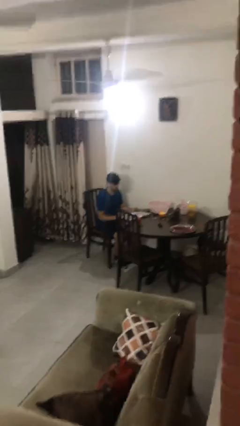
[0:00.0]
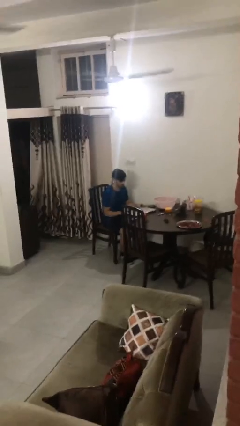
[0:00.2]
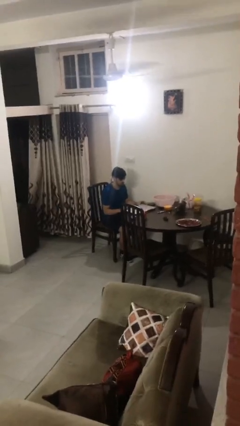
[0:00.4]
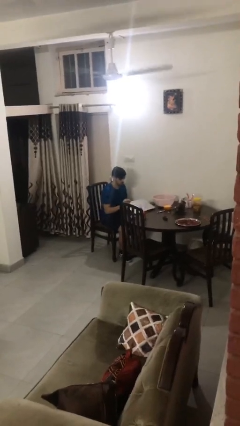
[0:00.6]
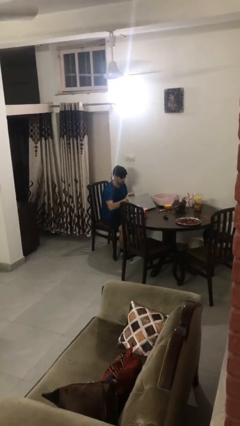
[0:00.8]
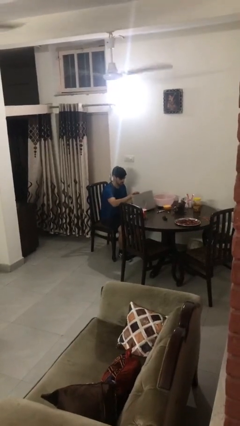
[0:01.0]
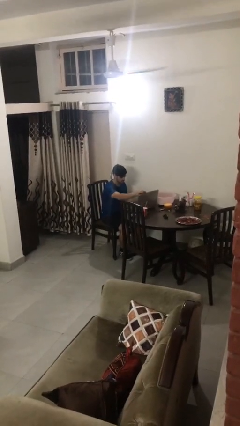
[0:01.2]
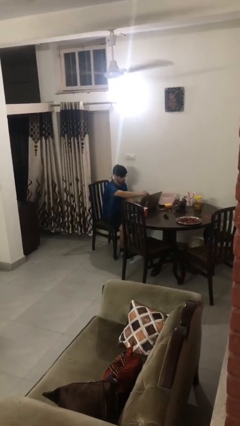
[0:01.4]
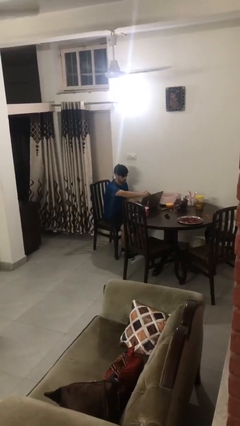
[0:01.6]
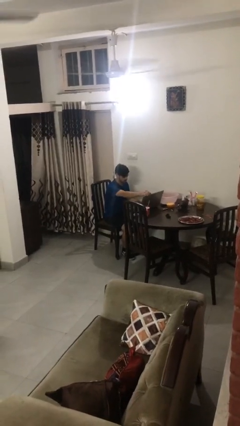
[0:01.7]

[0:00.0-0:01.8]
person opens laptop

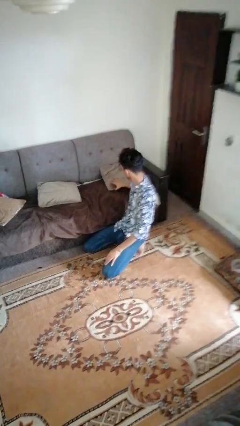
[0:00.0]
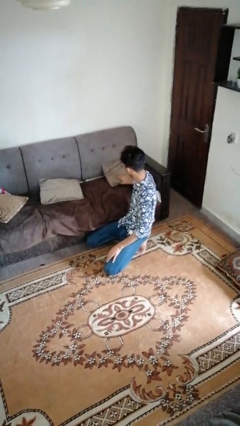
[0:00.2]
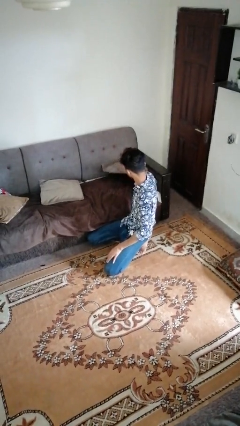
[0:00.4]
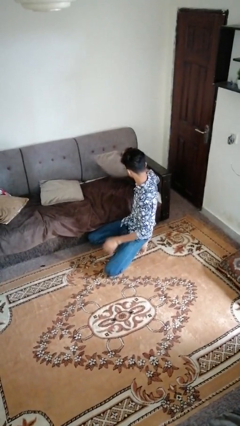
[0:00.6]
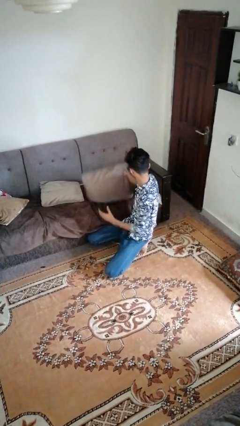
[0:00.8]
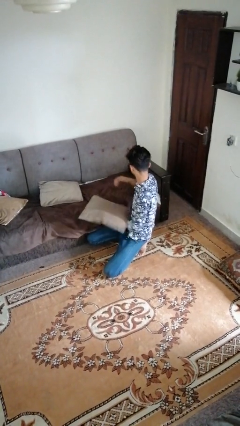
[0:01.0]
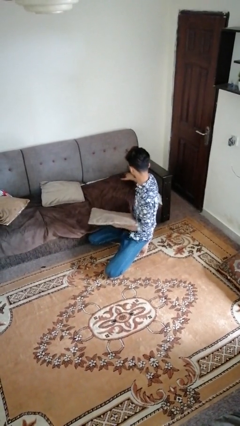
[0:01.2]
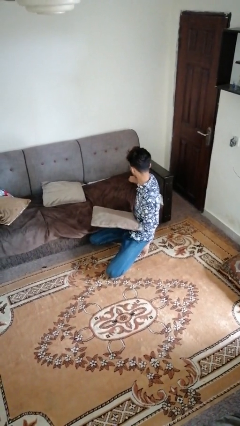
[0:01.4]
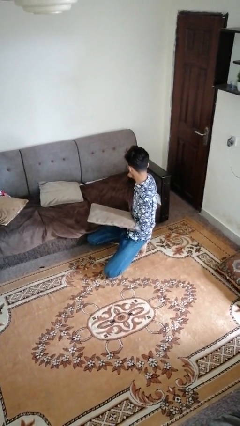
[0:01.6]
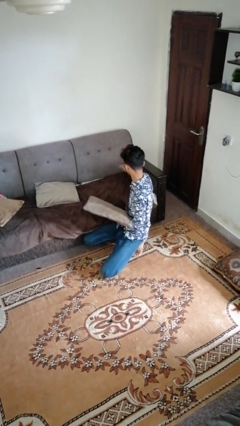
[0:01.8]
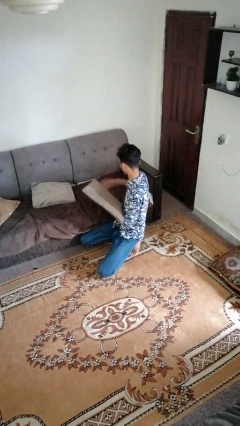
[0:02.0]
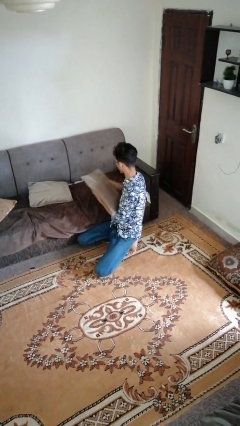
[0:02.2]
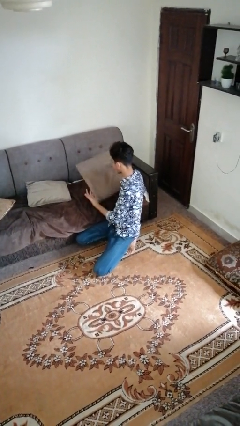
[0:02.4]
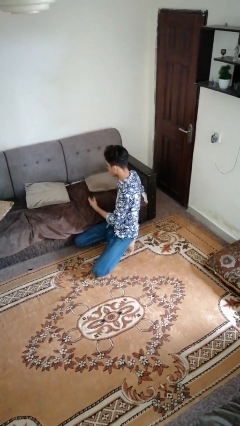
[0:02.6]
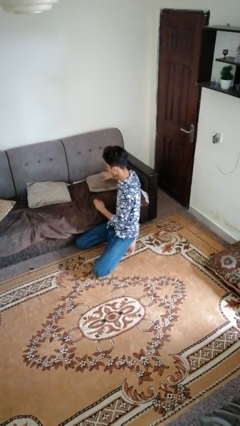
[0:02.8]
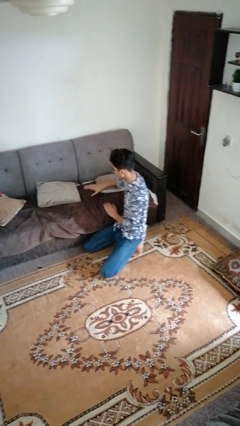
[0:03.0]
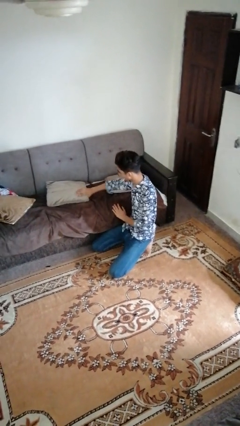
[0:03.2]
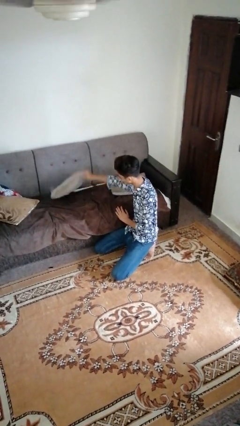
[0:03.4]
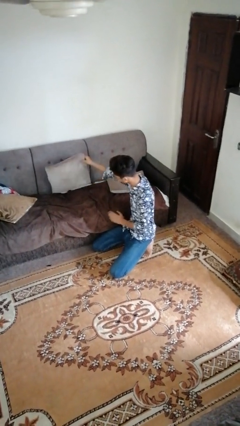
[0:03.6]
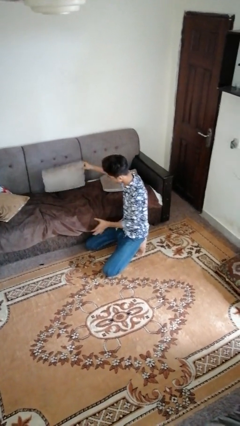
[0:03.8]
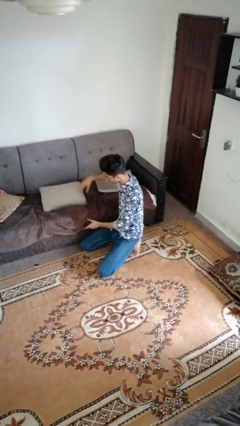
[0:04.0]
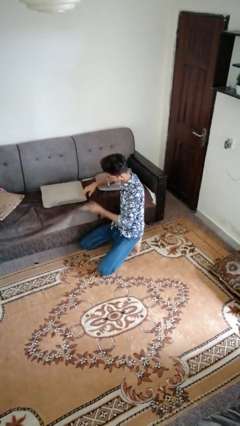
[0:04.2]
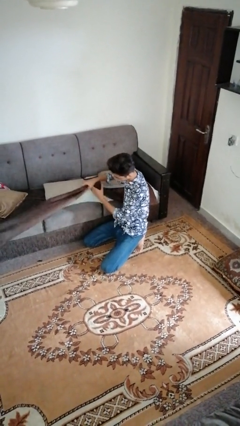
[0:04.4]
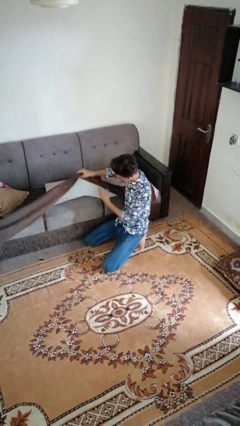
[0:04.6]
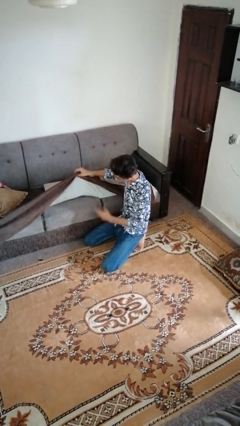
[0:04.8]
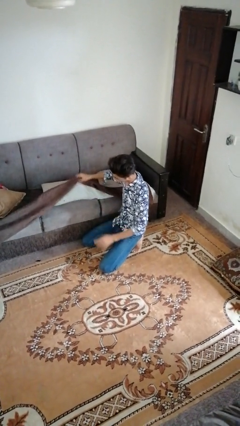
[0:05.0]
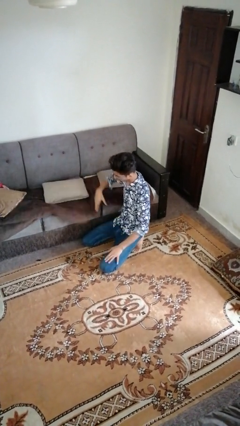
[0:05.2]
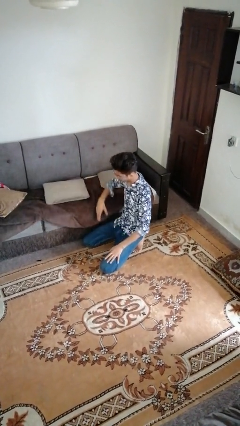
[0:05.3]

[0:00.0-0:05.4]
person searches under couch

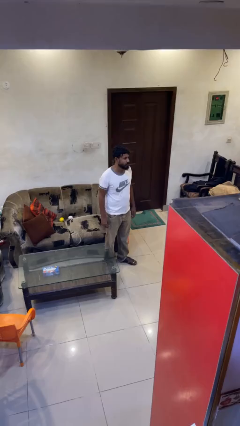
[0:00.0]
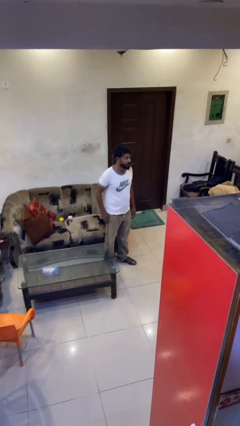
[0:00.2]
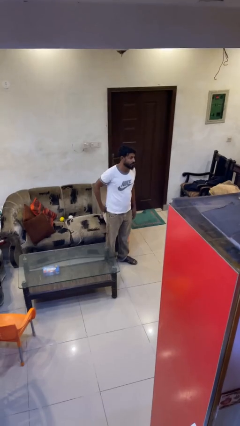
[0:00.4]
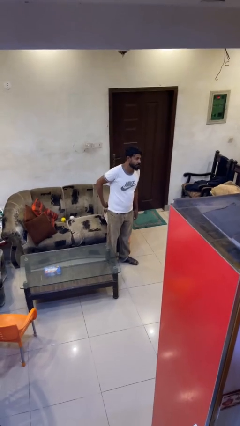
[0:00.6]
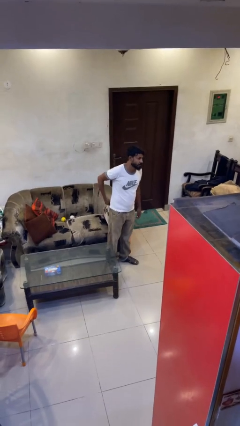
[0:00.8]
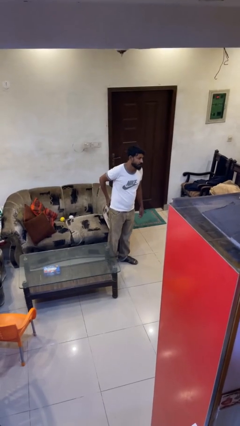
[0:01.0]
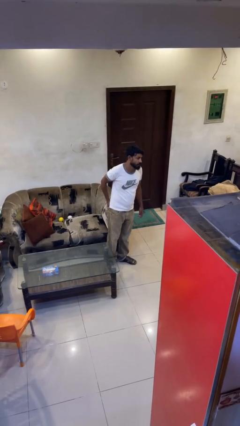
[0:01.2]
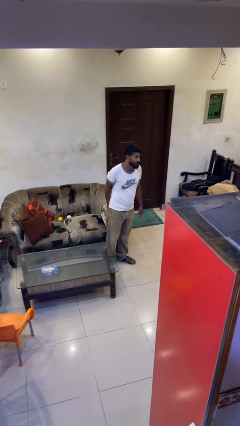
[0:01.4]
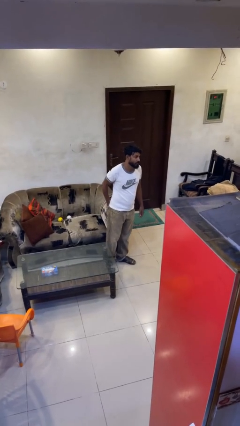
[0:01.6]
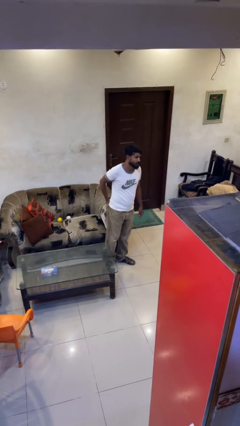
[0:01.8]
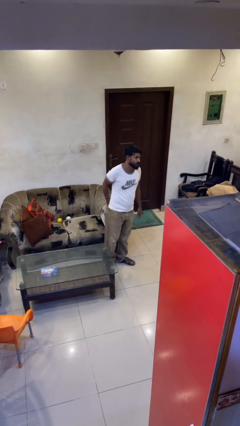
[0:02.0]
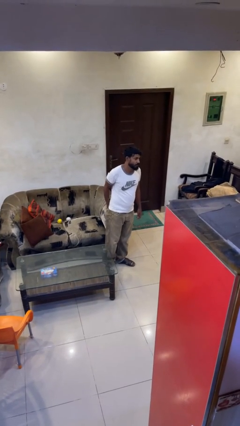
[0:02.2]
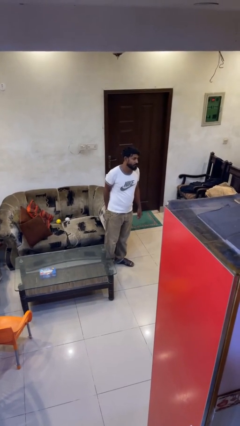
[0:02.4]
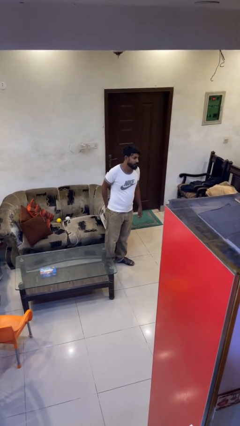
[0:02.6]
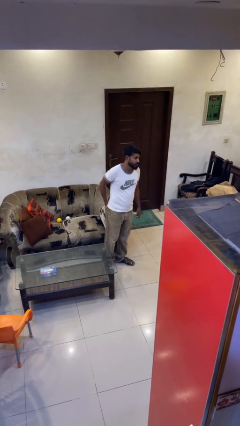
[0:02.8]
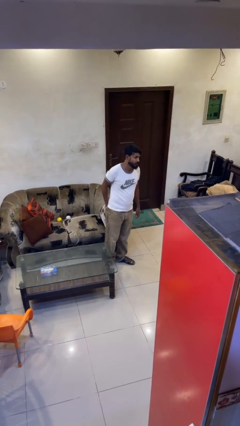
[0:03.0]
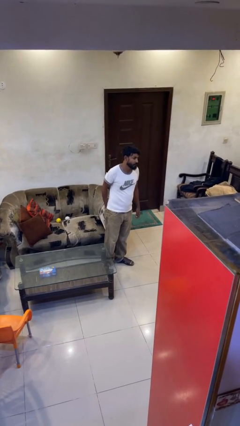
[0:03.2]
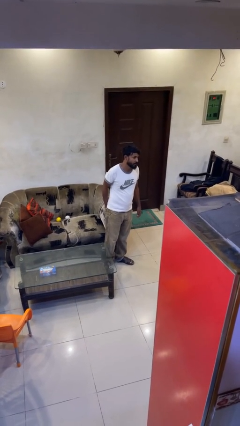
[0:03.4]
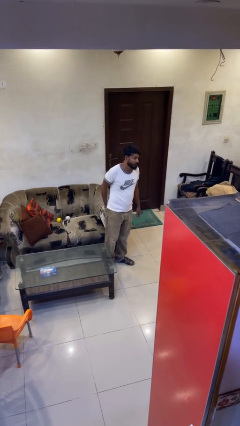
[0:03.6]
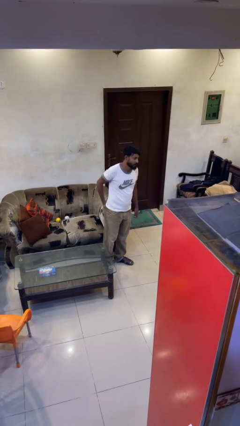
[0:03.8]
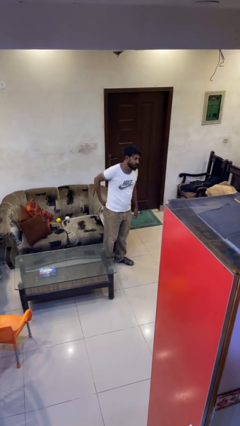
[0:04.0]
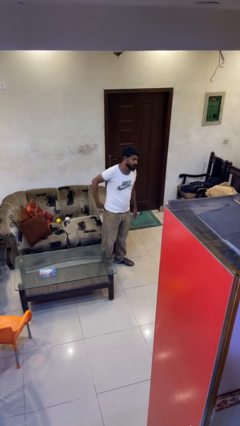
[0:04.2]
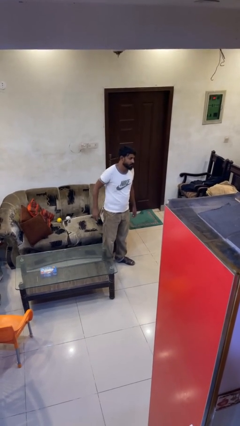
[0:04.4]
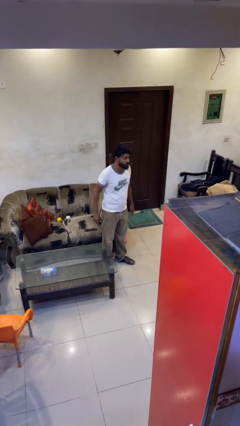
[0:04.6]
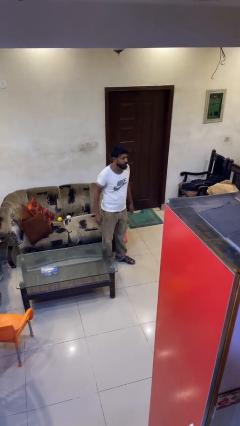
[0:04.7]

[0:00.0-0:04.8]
person puts hands in back pockets

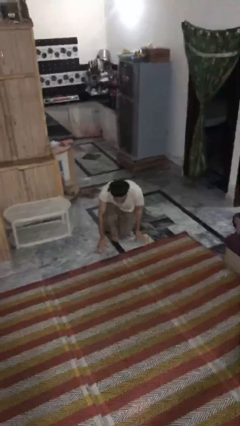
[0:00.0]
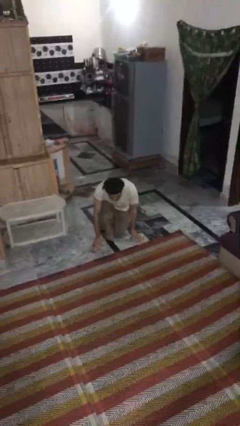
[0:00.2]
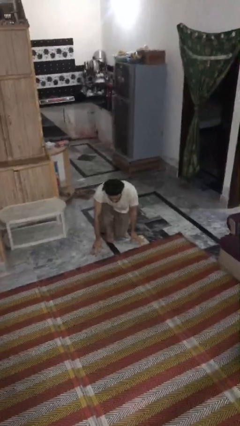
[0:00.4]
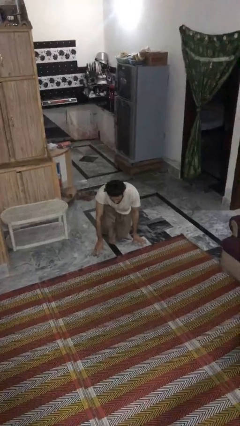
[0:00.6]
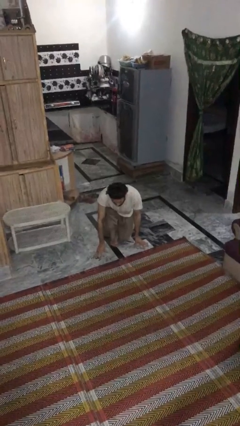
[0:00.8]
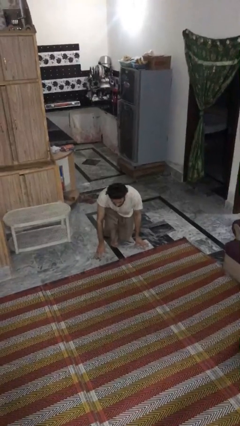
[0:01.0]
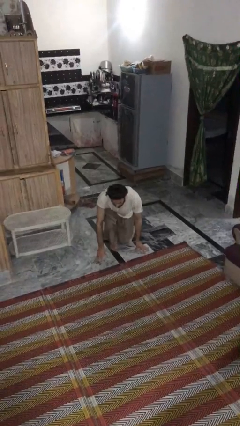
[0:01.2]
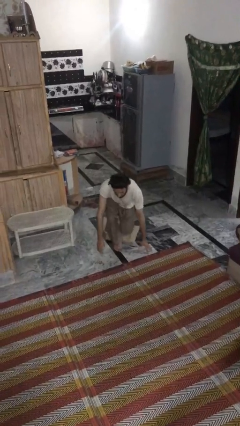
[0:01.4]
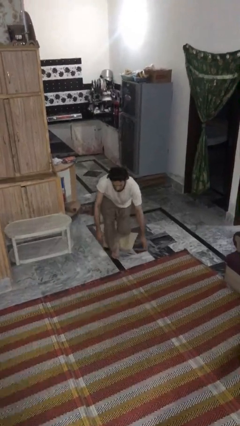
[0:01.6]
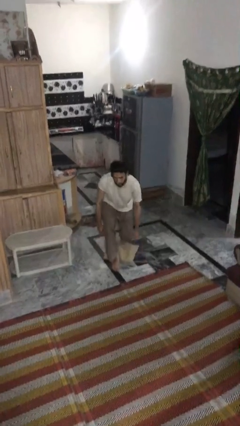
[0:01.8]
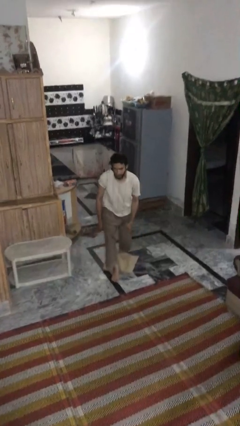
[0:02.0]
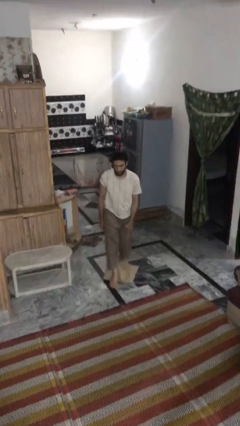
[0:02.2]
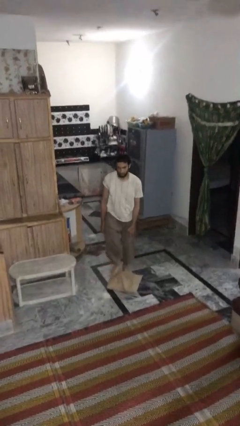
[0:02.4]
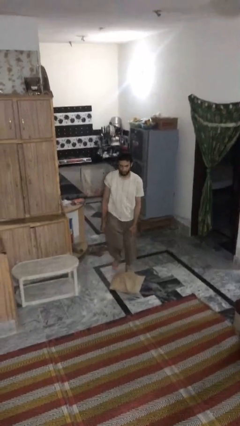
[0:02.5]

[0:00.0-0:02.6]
person stands up from floor

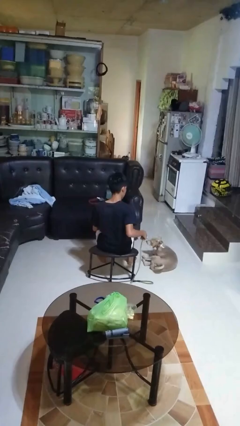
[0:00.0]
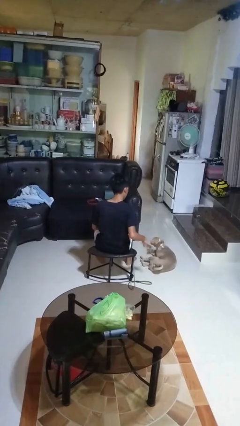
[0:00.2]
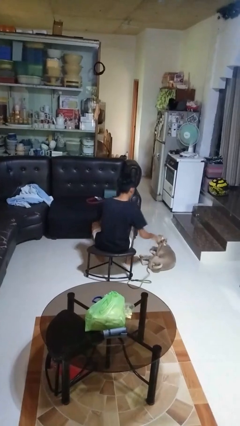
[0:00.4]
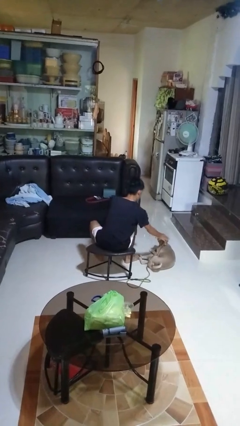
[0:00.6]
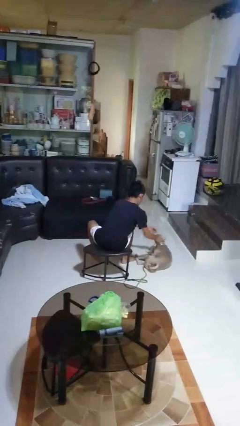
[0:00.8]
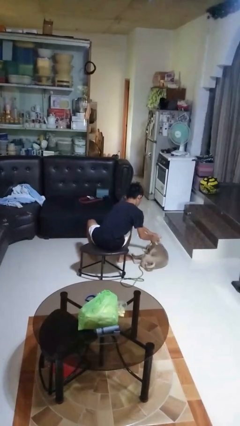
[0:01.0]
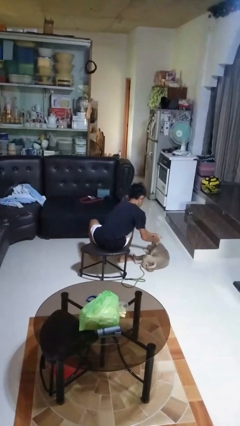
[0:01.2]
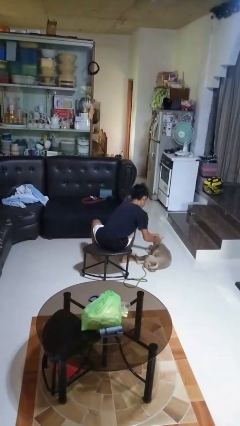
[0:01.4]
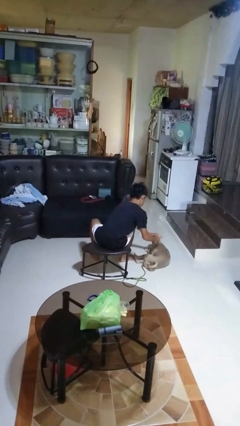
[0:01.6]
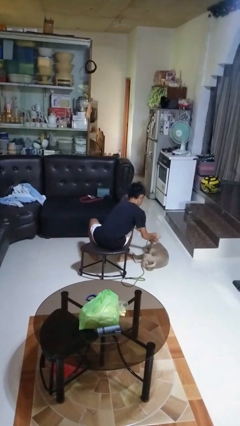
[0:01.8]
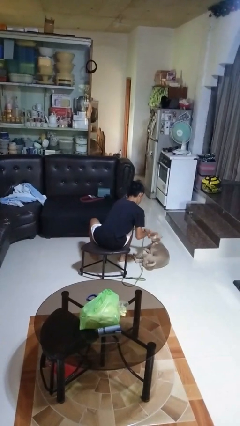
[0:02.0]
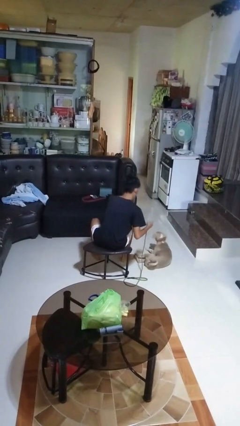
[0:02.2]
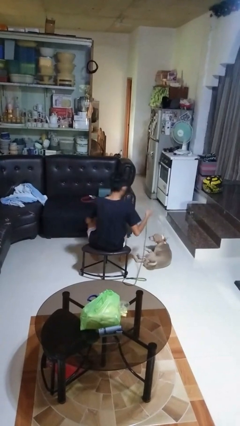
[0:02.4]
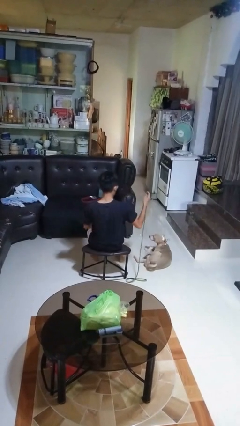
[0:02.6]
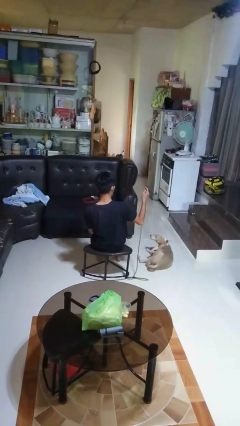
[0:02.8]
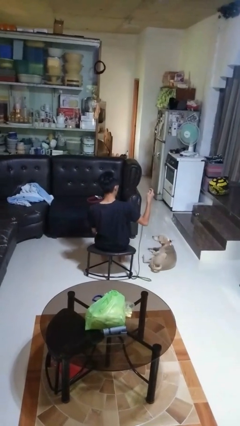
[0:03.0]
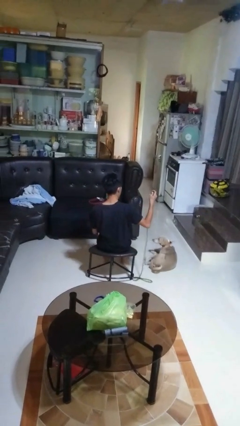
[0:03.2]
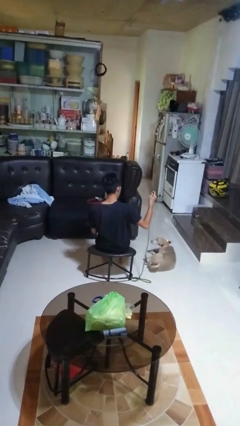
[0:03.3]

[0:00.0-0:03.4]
person unattaches leash from dog
